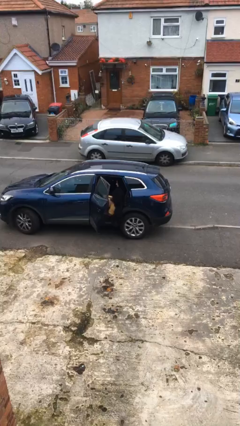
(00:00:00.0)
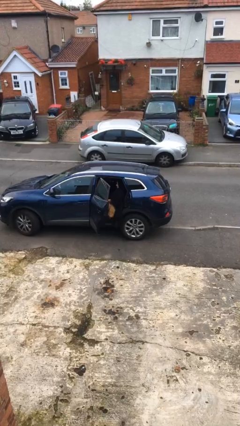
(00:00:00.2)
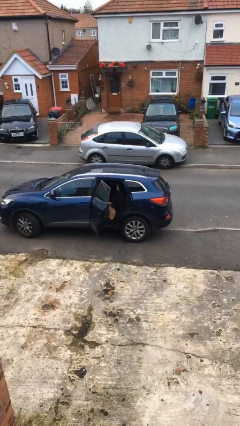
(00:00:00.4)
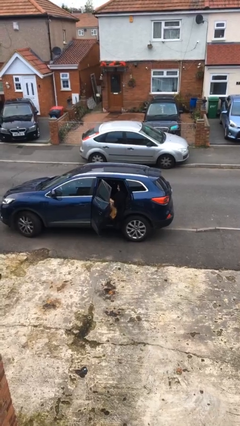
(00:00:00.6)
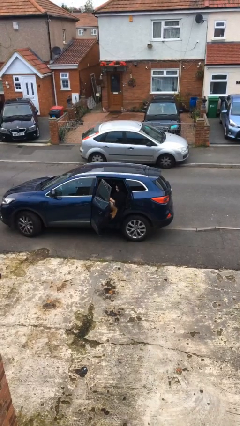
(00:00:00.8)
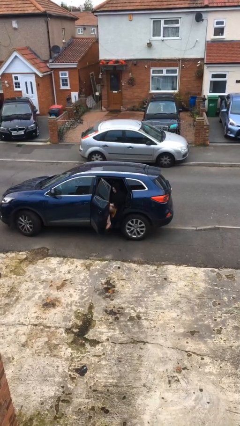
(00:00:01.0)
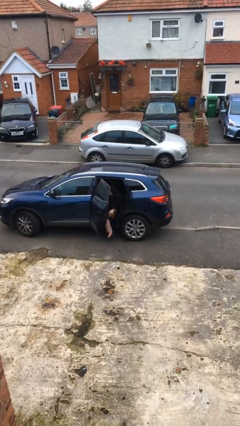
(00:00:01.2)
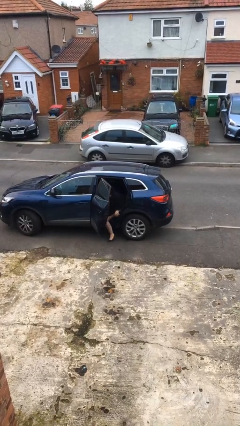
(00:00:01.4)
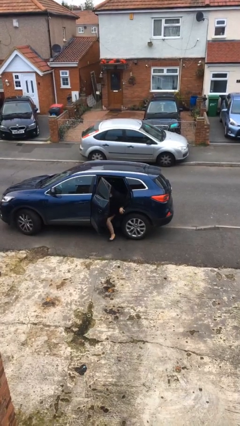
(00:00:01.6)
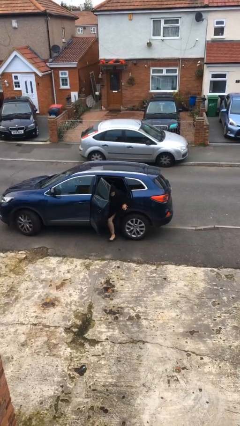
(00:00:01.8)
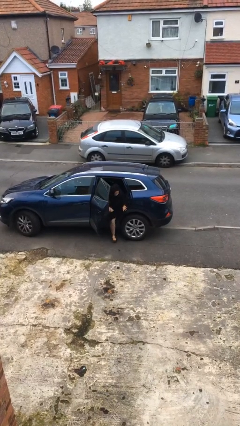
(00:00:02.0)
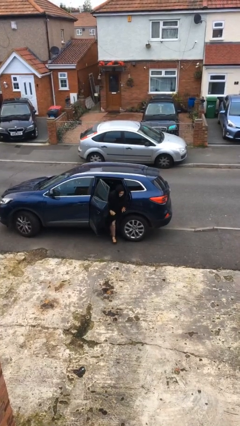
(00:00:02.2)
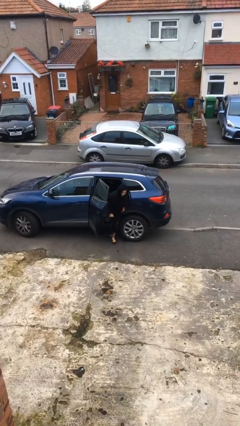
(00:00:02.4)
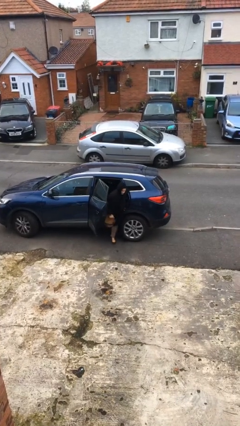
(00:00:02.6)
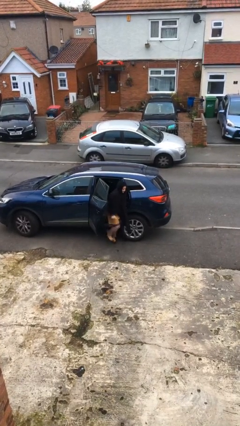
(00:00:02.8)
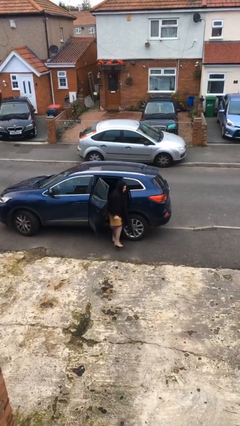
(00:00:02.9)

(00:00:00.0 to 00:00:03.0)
person exits car

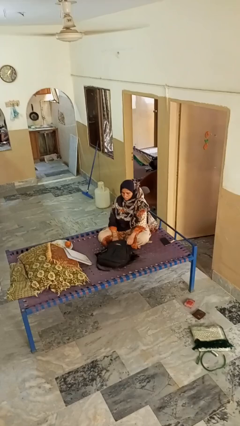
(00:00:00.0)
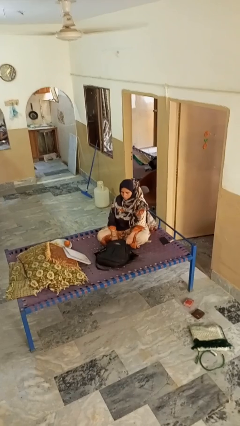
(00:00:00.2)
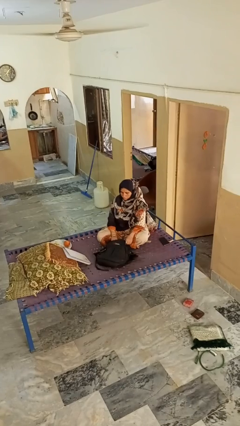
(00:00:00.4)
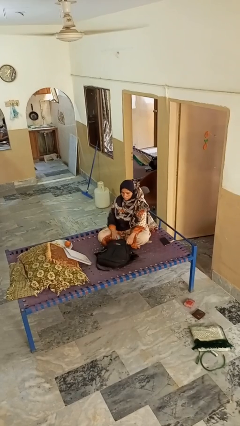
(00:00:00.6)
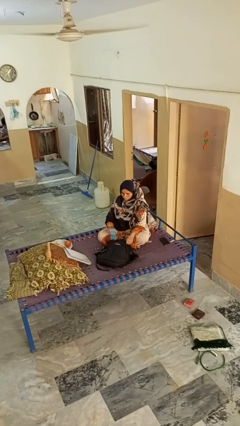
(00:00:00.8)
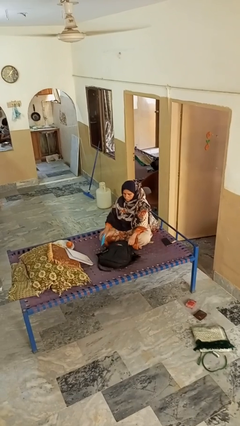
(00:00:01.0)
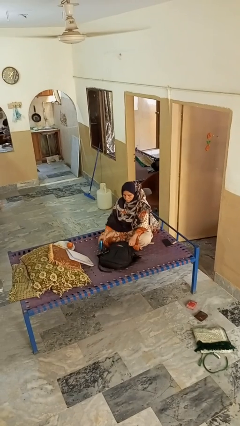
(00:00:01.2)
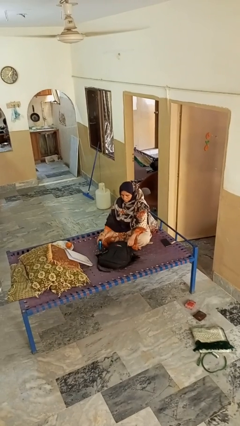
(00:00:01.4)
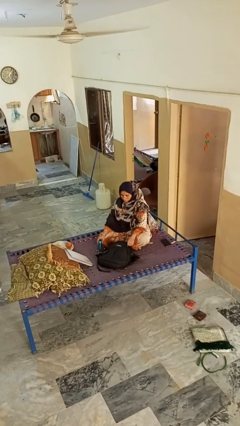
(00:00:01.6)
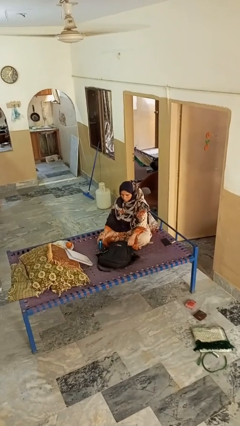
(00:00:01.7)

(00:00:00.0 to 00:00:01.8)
person takes object from bag

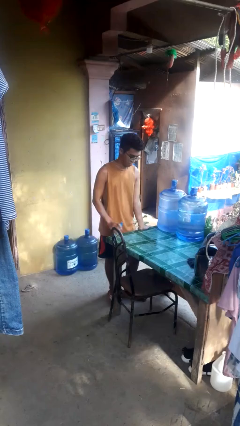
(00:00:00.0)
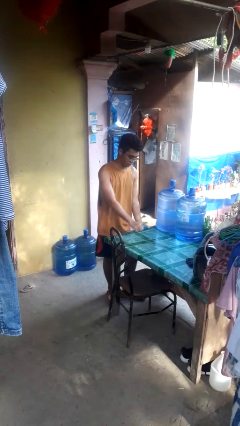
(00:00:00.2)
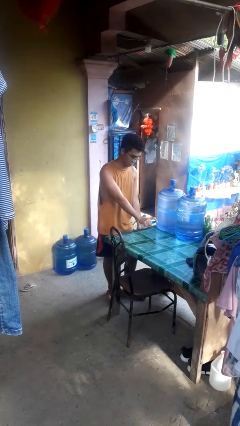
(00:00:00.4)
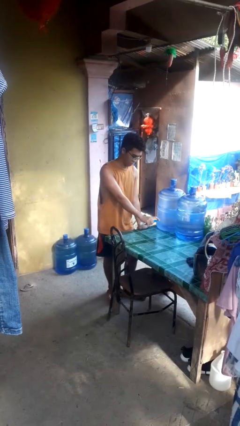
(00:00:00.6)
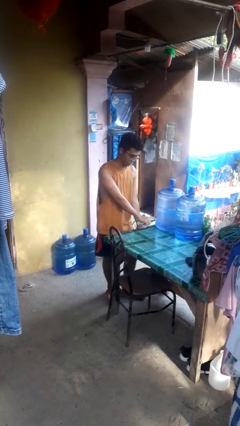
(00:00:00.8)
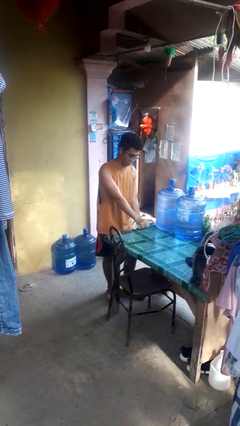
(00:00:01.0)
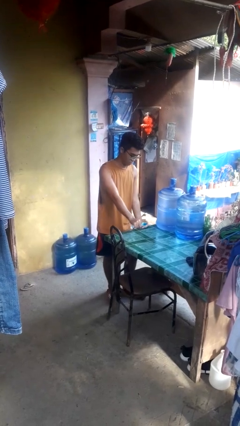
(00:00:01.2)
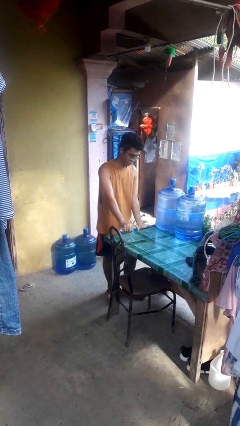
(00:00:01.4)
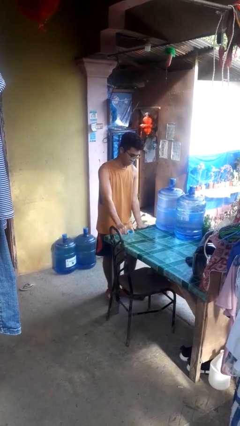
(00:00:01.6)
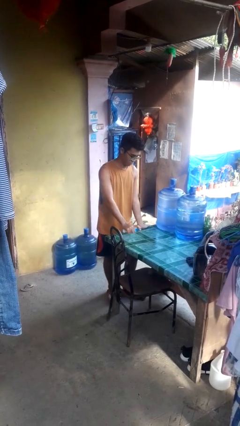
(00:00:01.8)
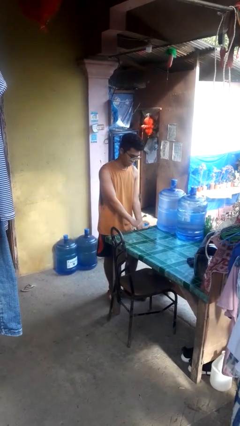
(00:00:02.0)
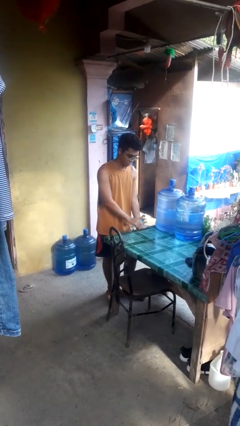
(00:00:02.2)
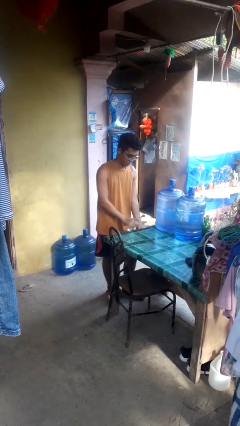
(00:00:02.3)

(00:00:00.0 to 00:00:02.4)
person sprays from bottle

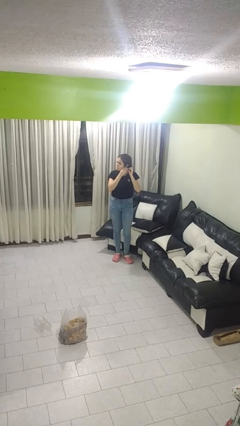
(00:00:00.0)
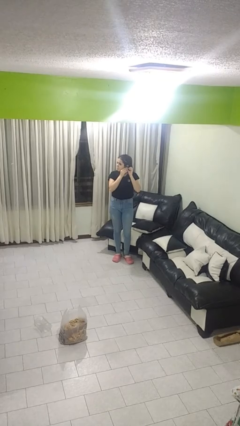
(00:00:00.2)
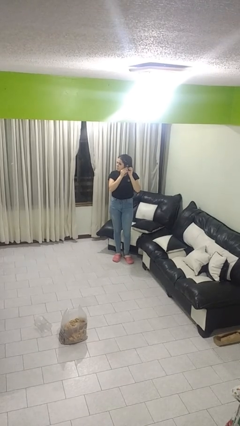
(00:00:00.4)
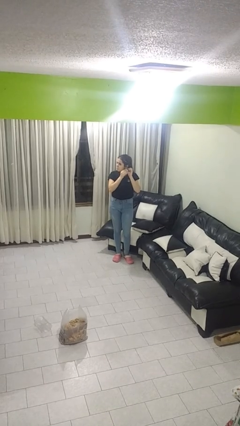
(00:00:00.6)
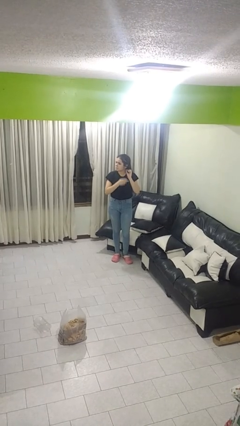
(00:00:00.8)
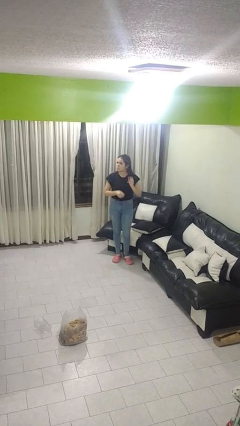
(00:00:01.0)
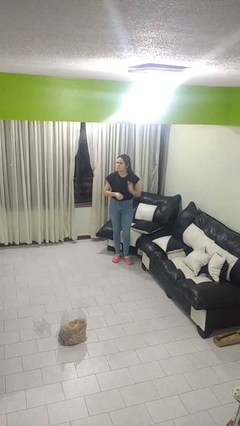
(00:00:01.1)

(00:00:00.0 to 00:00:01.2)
person takes off earrings

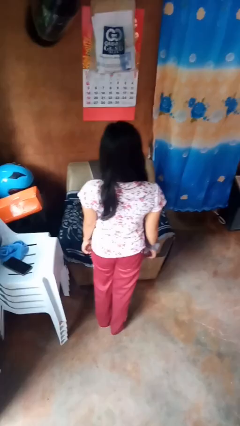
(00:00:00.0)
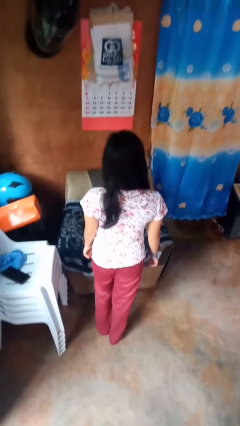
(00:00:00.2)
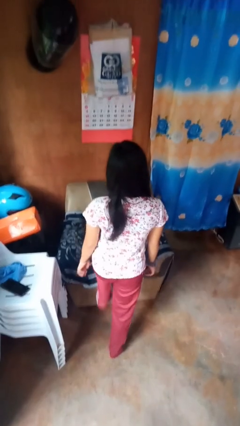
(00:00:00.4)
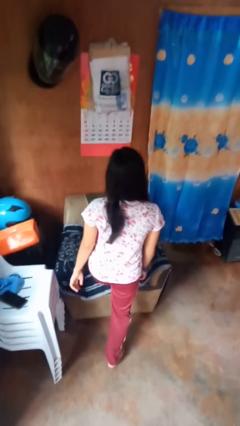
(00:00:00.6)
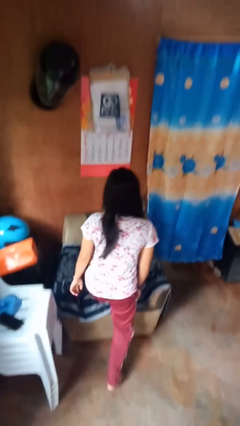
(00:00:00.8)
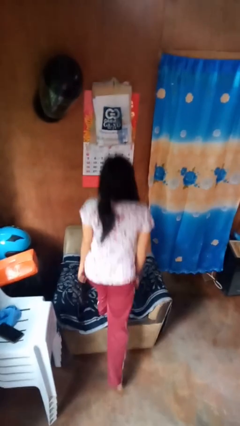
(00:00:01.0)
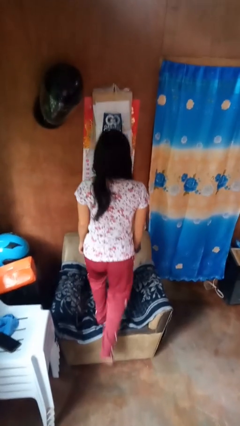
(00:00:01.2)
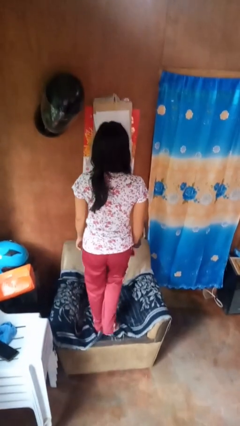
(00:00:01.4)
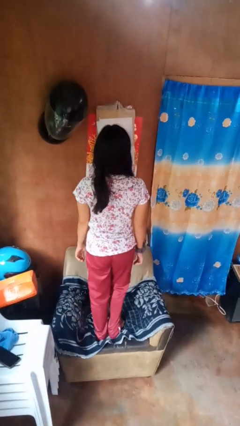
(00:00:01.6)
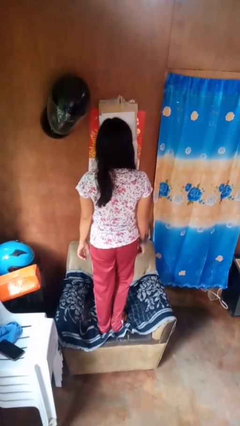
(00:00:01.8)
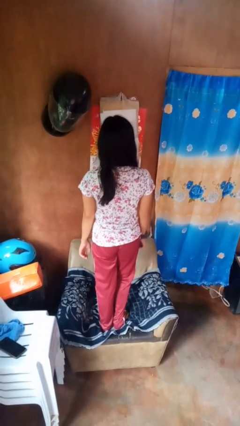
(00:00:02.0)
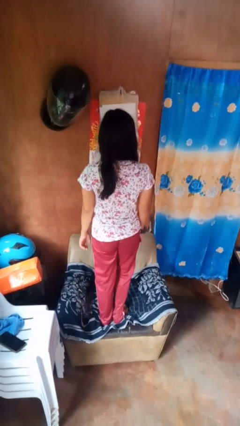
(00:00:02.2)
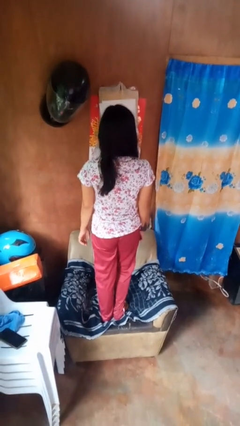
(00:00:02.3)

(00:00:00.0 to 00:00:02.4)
person climbs on couch

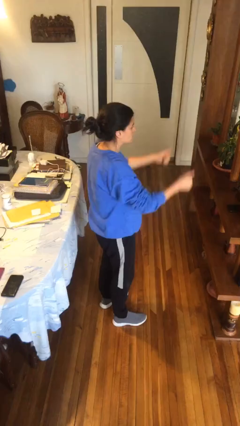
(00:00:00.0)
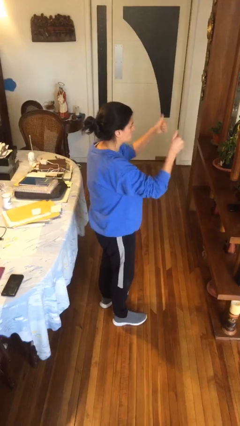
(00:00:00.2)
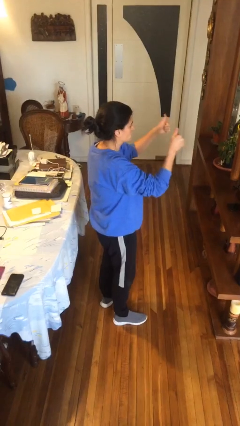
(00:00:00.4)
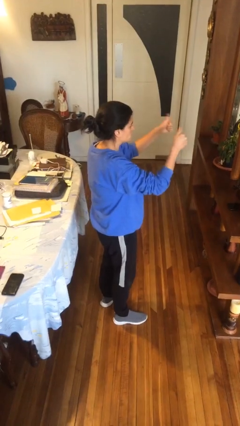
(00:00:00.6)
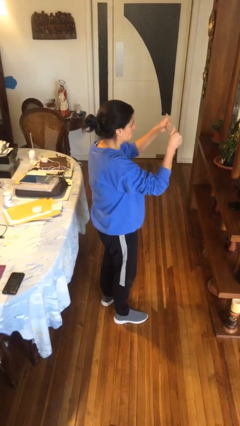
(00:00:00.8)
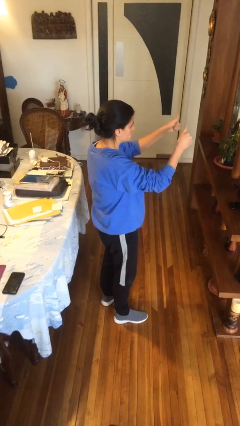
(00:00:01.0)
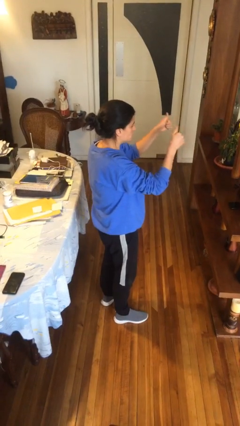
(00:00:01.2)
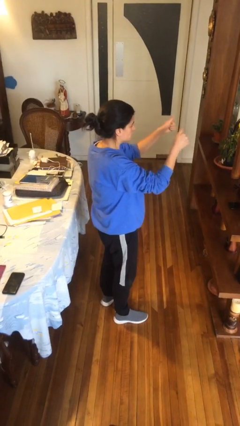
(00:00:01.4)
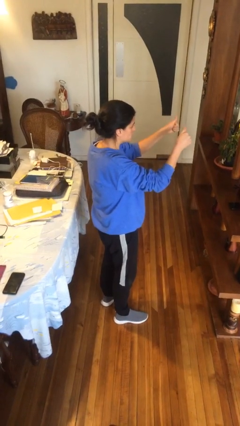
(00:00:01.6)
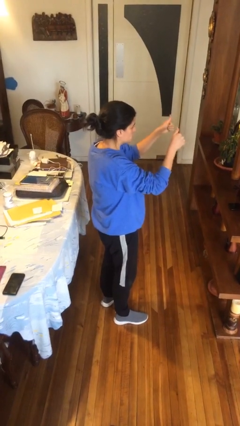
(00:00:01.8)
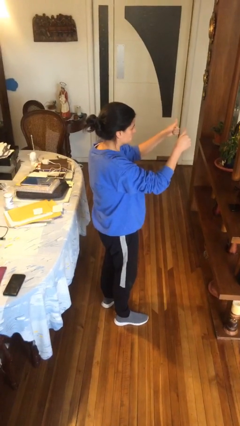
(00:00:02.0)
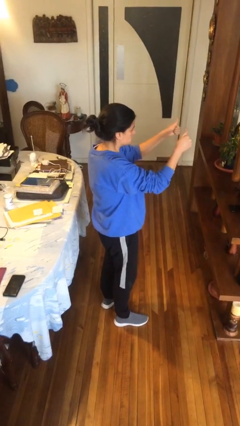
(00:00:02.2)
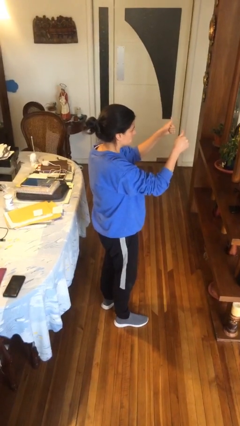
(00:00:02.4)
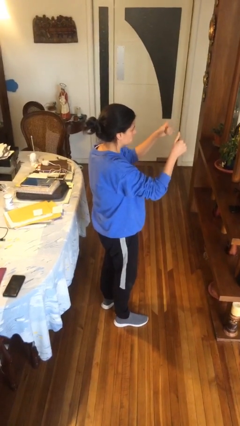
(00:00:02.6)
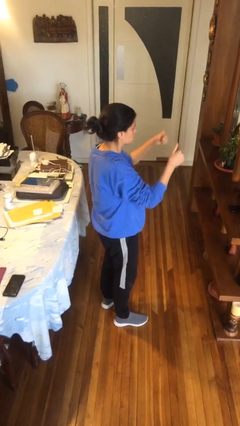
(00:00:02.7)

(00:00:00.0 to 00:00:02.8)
person gestures thumbs up

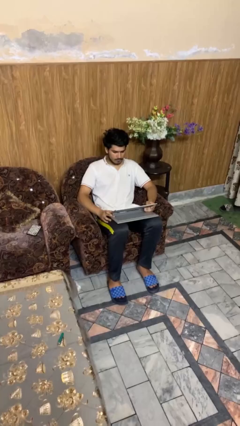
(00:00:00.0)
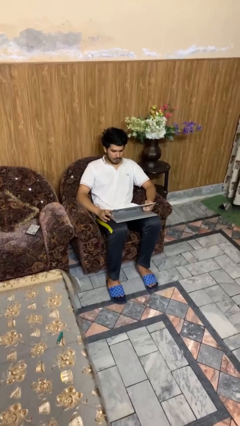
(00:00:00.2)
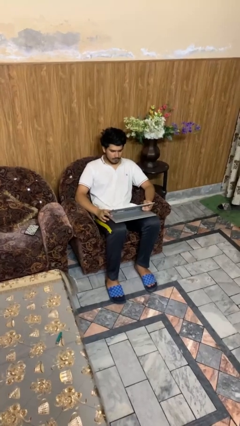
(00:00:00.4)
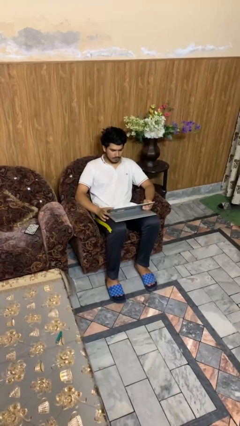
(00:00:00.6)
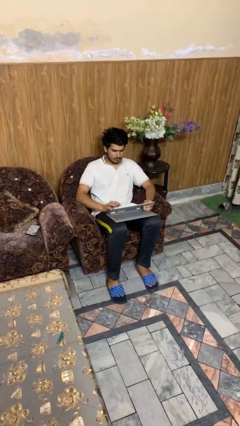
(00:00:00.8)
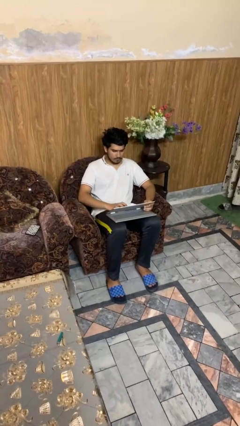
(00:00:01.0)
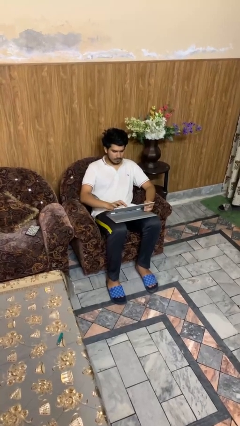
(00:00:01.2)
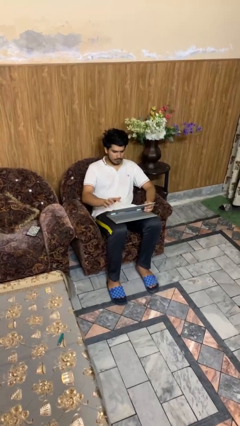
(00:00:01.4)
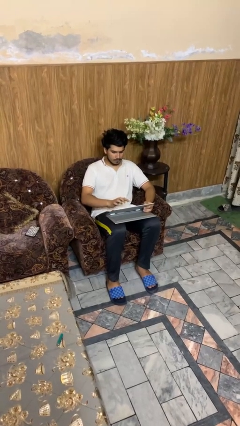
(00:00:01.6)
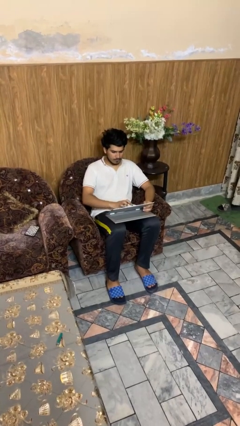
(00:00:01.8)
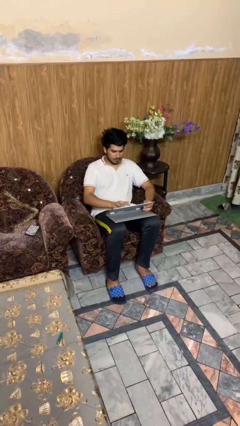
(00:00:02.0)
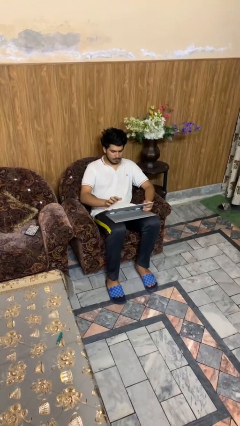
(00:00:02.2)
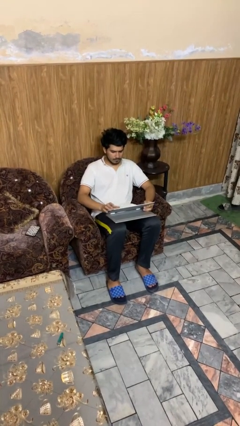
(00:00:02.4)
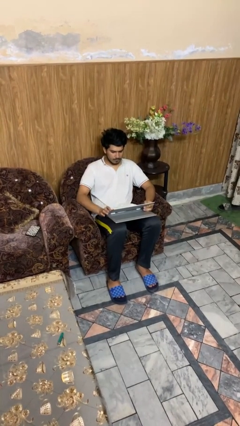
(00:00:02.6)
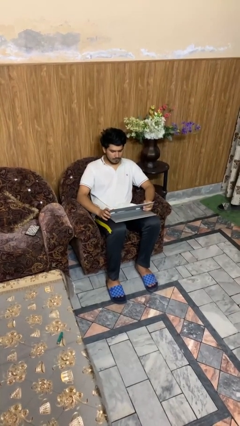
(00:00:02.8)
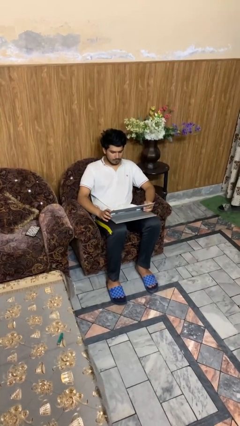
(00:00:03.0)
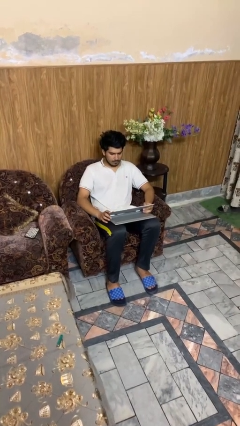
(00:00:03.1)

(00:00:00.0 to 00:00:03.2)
person interacts with tablet

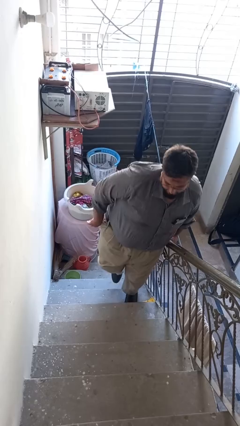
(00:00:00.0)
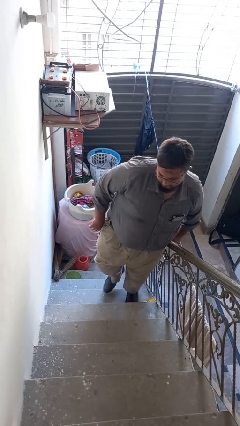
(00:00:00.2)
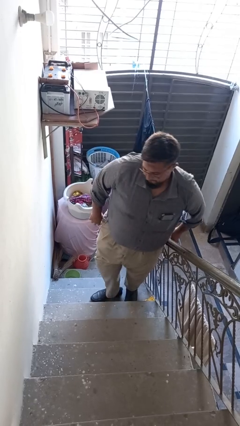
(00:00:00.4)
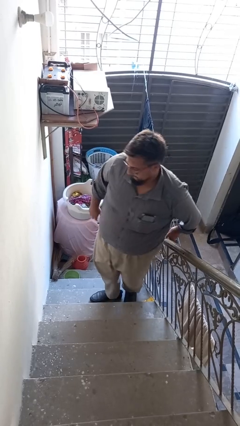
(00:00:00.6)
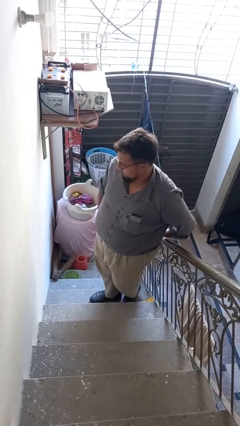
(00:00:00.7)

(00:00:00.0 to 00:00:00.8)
person climbs down stairs
